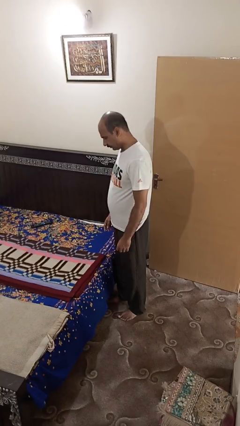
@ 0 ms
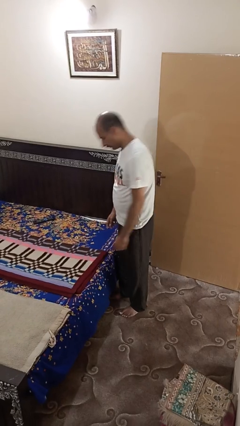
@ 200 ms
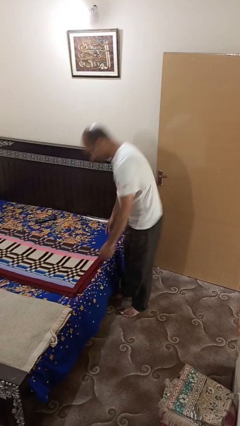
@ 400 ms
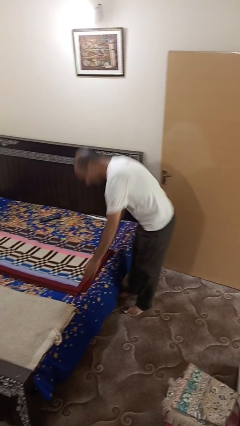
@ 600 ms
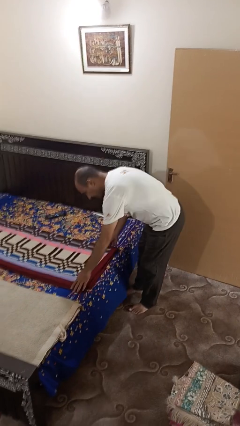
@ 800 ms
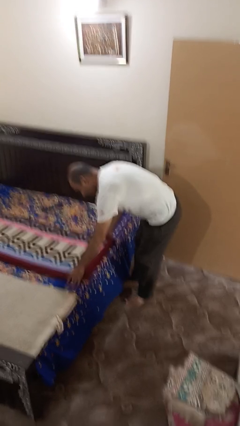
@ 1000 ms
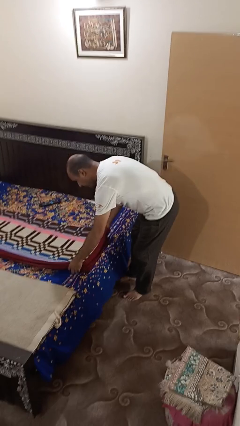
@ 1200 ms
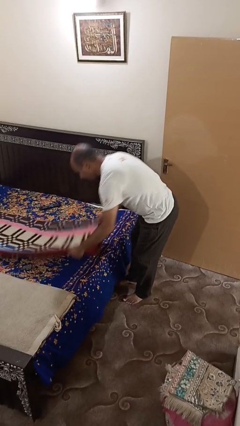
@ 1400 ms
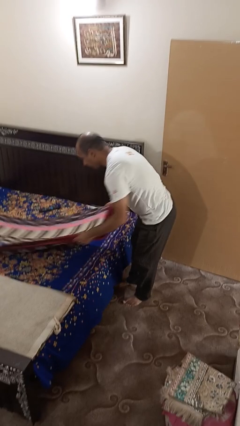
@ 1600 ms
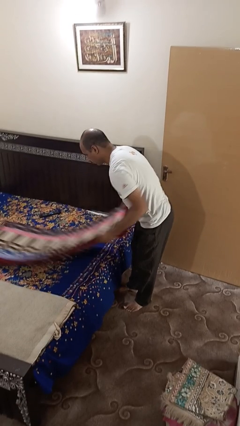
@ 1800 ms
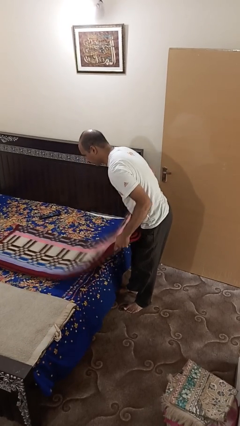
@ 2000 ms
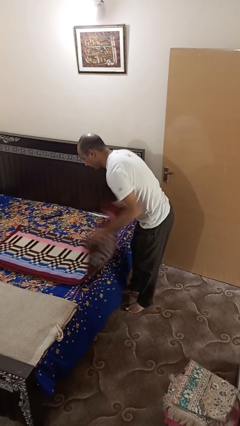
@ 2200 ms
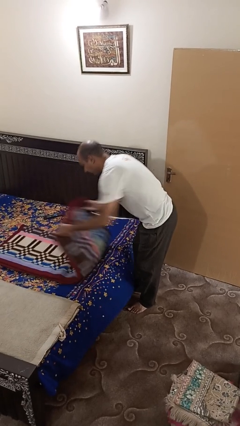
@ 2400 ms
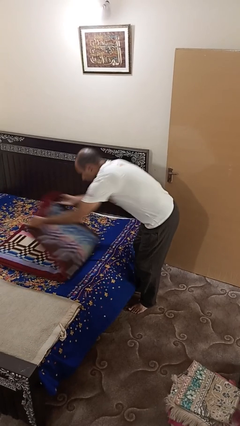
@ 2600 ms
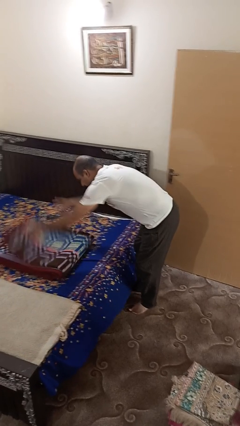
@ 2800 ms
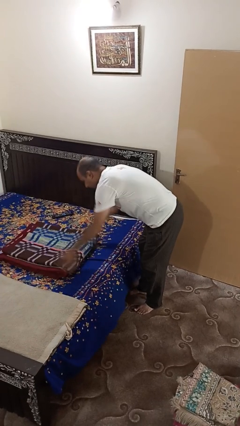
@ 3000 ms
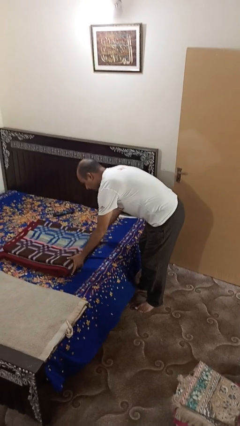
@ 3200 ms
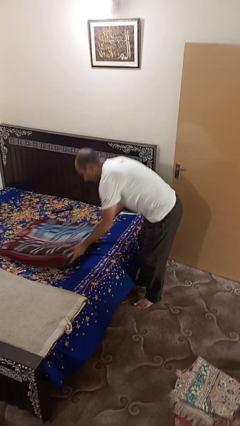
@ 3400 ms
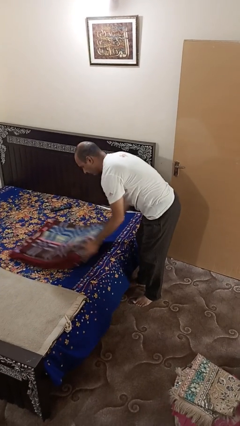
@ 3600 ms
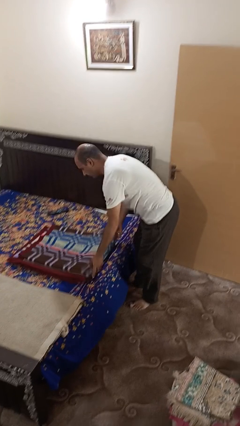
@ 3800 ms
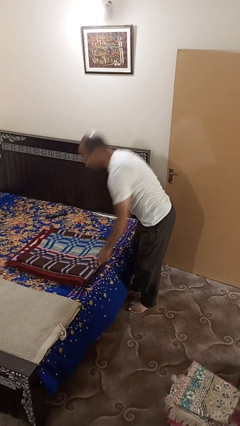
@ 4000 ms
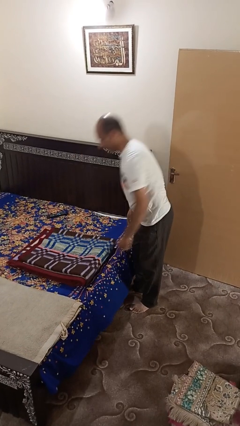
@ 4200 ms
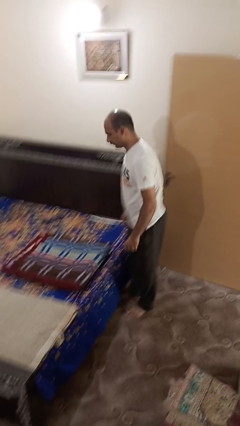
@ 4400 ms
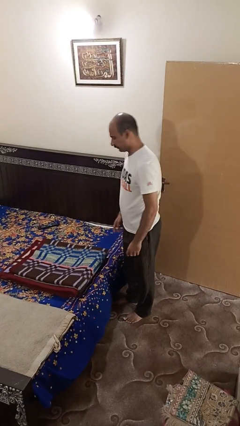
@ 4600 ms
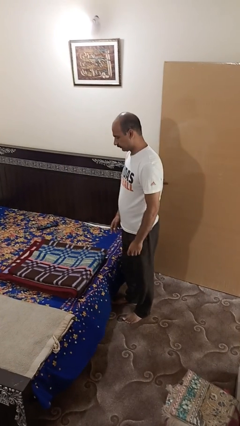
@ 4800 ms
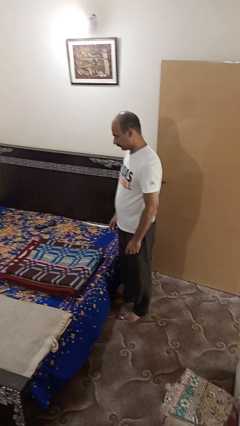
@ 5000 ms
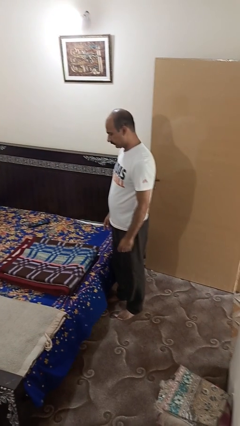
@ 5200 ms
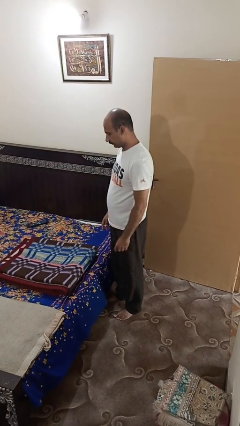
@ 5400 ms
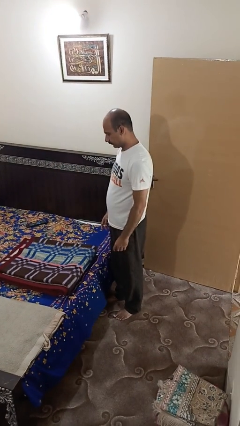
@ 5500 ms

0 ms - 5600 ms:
person folds blanket

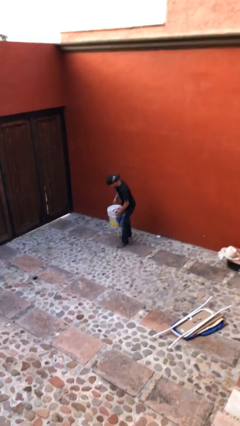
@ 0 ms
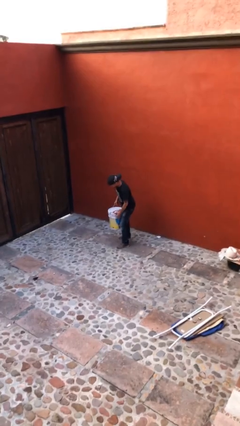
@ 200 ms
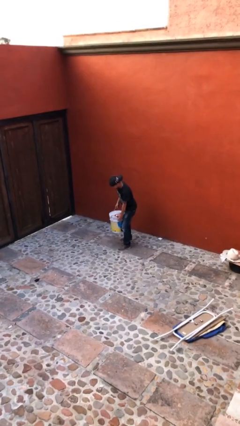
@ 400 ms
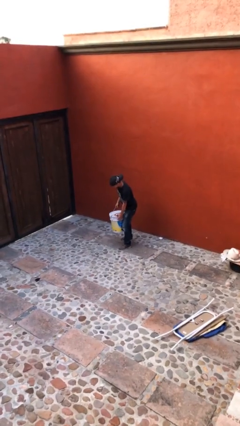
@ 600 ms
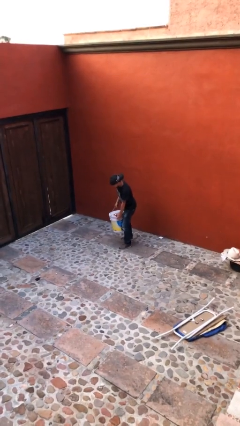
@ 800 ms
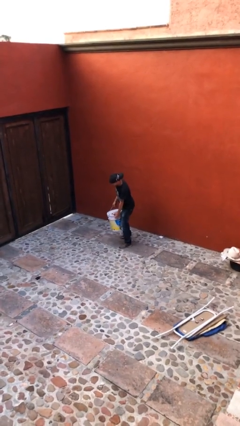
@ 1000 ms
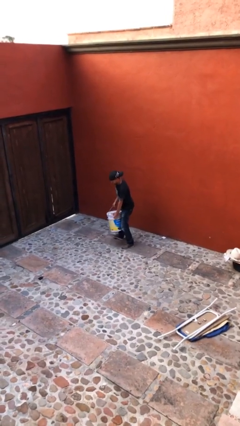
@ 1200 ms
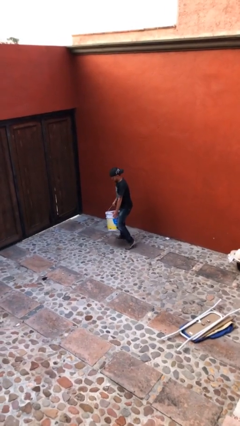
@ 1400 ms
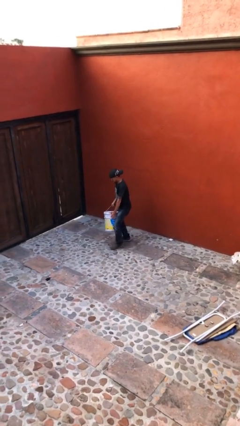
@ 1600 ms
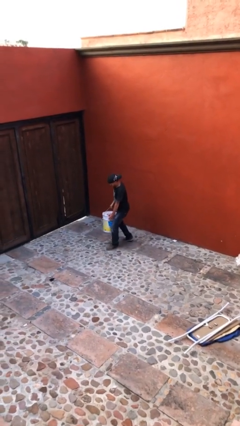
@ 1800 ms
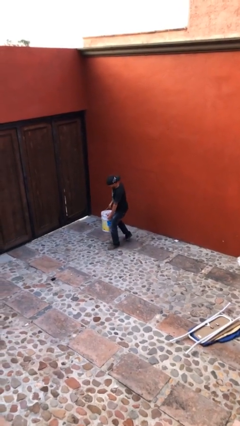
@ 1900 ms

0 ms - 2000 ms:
person carries heavy object

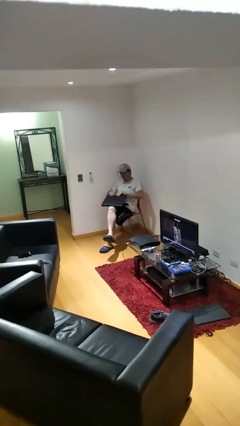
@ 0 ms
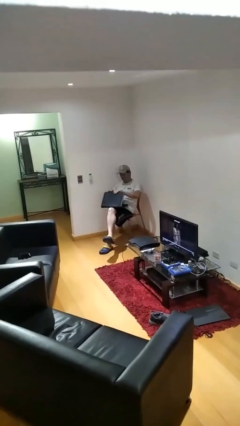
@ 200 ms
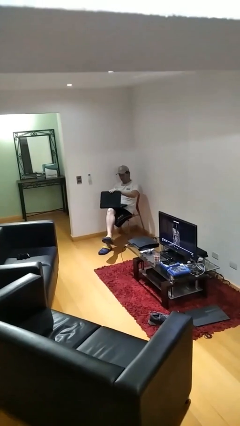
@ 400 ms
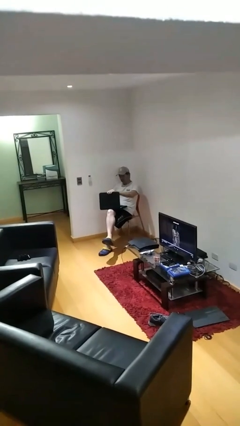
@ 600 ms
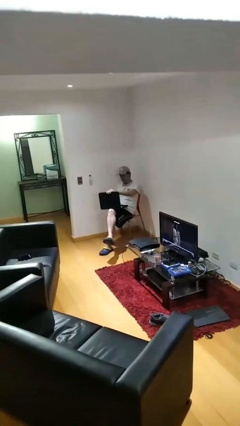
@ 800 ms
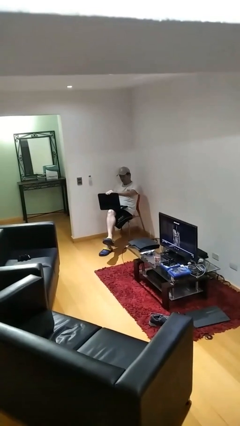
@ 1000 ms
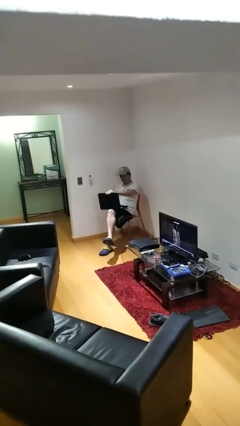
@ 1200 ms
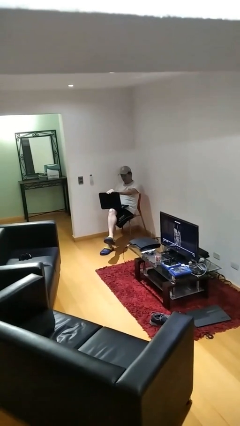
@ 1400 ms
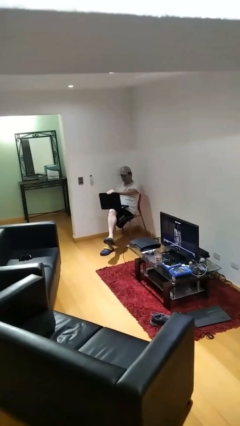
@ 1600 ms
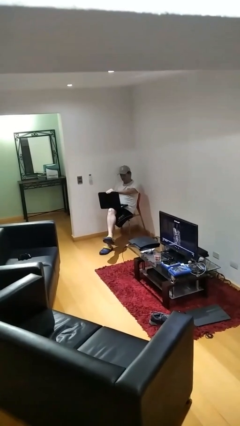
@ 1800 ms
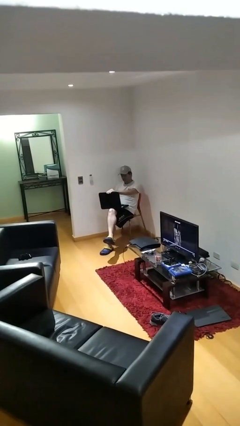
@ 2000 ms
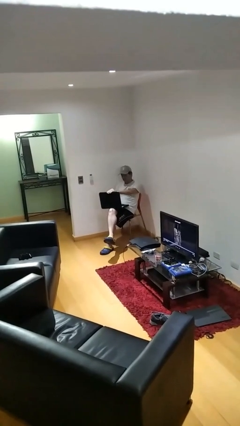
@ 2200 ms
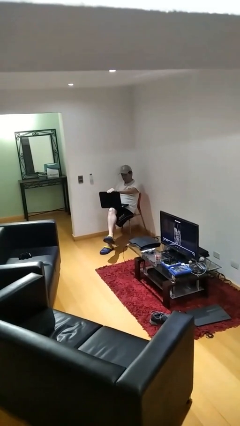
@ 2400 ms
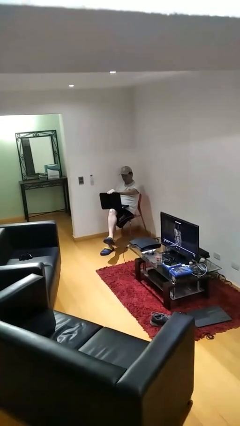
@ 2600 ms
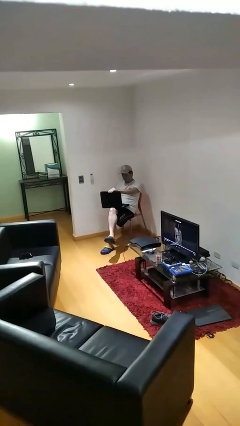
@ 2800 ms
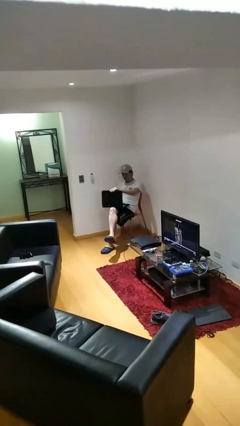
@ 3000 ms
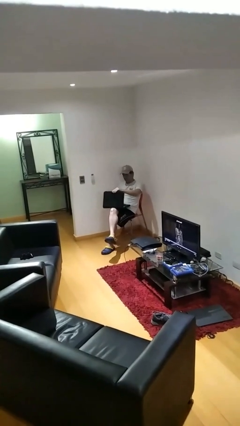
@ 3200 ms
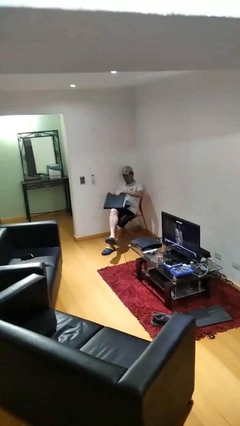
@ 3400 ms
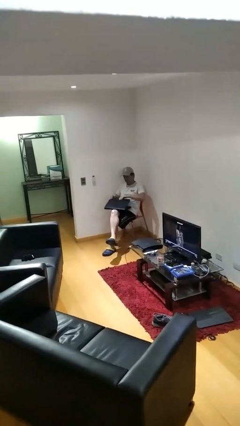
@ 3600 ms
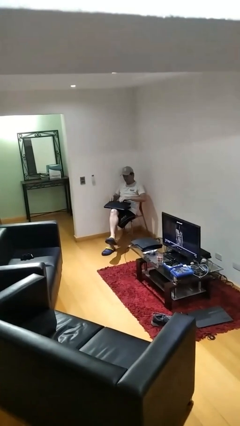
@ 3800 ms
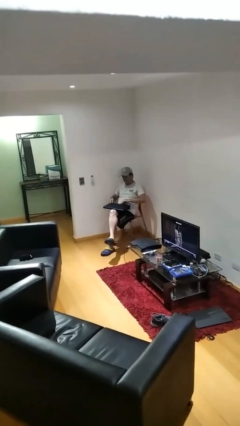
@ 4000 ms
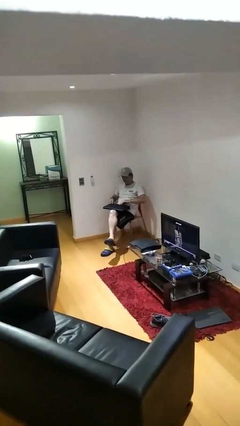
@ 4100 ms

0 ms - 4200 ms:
person interacts with laptop

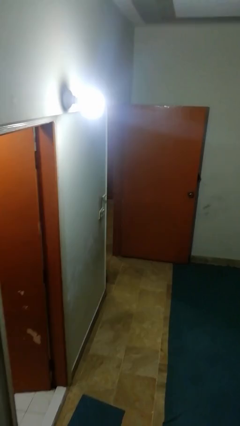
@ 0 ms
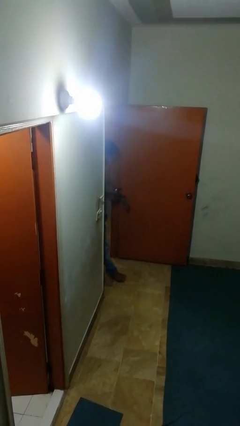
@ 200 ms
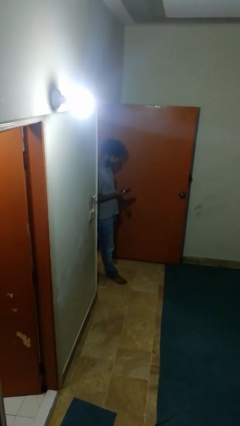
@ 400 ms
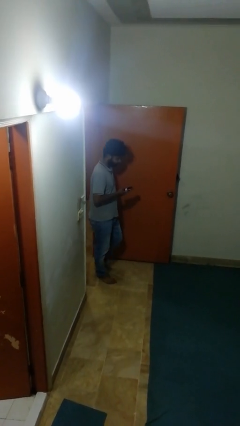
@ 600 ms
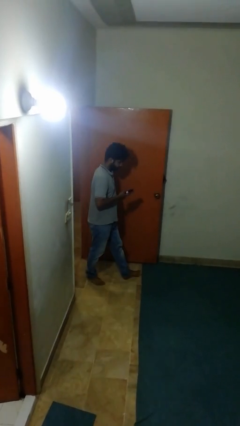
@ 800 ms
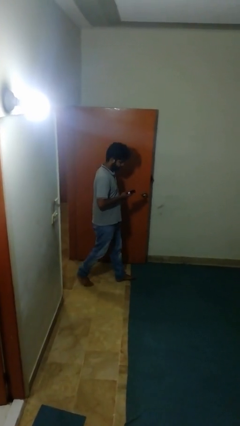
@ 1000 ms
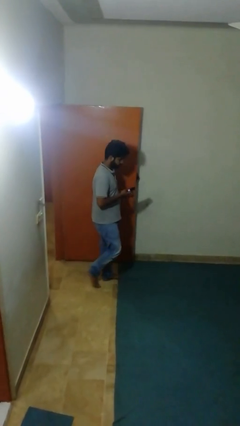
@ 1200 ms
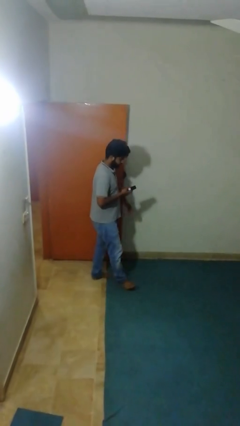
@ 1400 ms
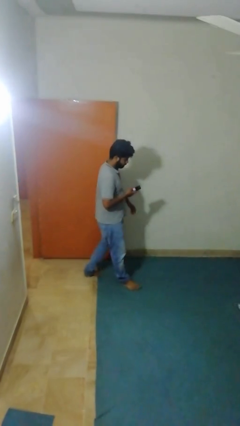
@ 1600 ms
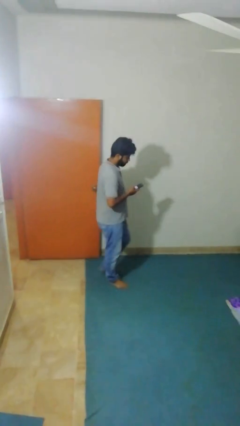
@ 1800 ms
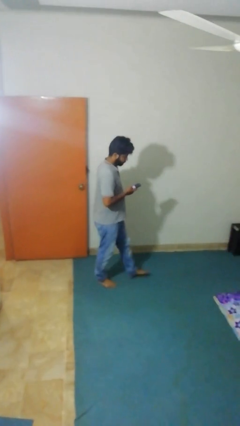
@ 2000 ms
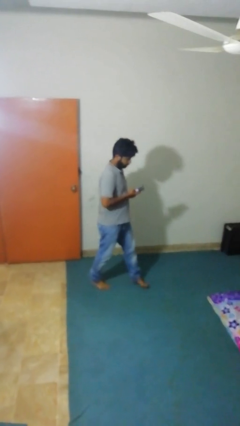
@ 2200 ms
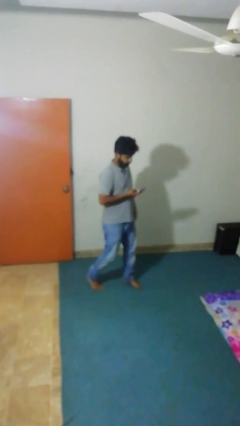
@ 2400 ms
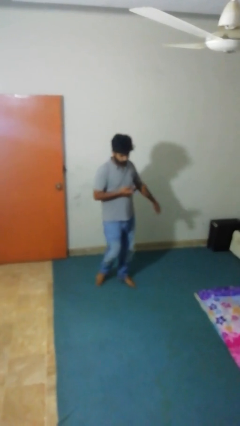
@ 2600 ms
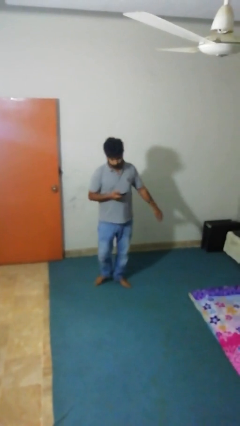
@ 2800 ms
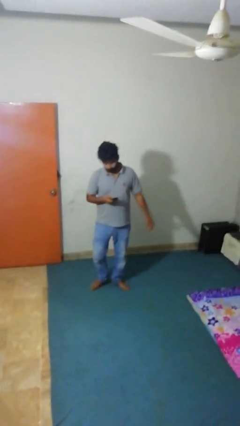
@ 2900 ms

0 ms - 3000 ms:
person enters scene through structure

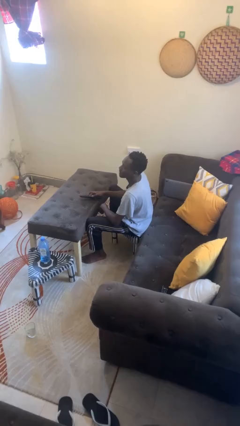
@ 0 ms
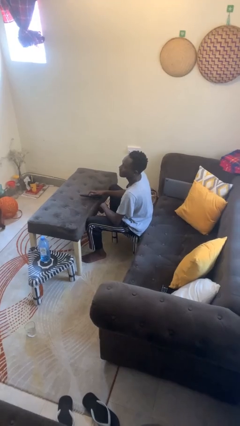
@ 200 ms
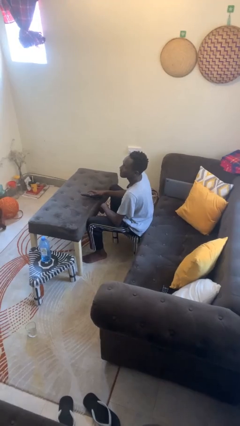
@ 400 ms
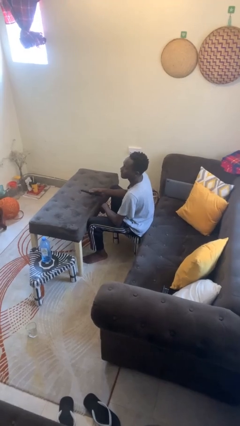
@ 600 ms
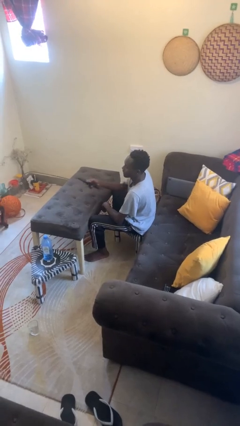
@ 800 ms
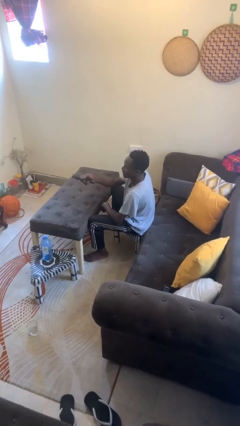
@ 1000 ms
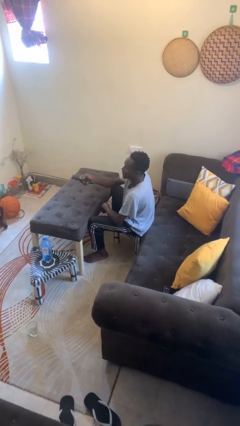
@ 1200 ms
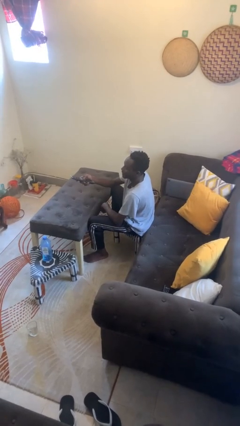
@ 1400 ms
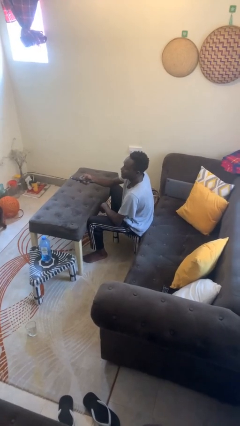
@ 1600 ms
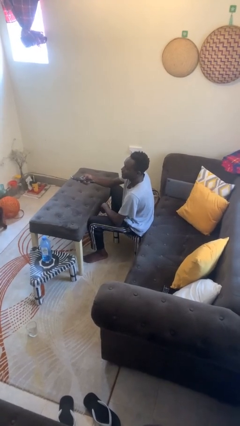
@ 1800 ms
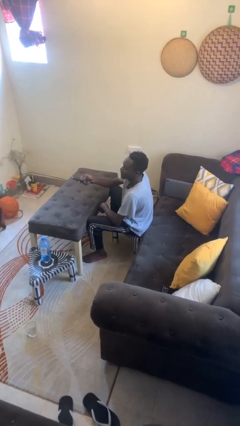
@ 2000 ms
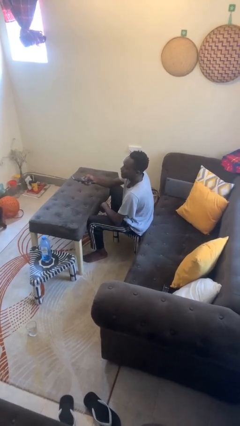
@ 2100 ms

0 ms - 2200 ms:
person uses television remote

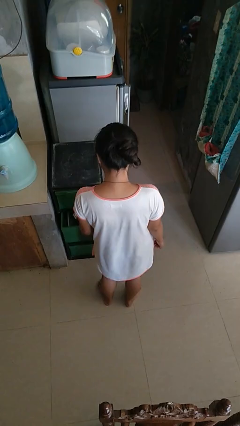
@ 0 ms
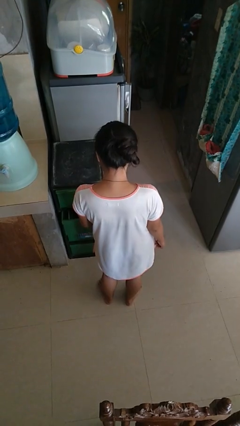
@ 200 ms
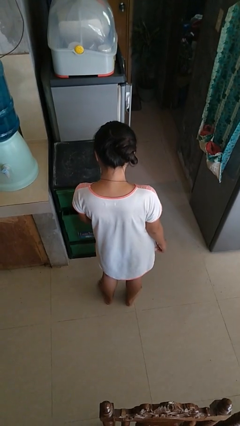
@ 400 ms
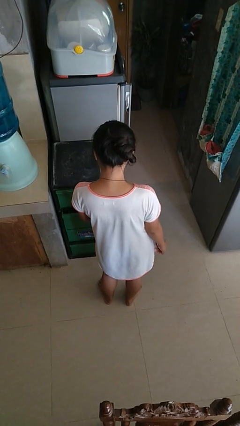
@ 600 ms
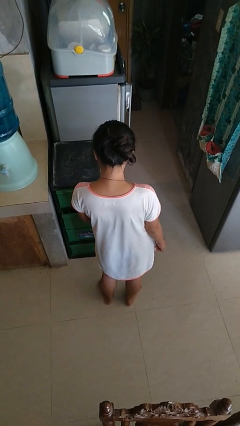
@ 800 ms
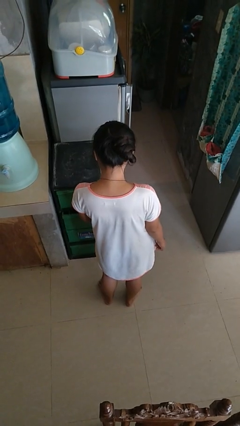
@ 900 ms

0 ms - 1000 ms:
person closes kitchen drawer
